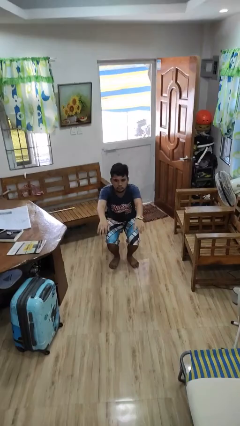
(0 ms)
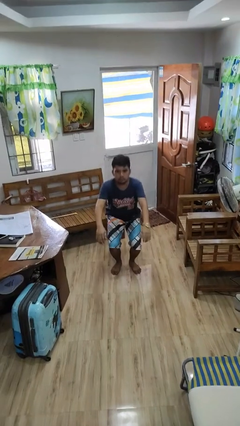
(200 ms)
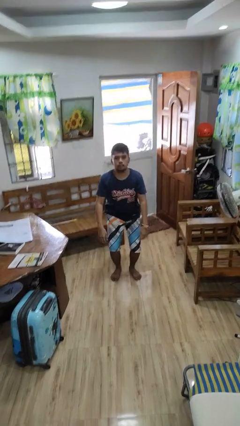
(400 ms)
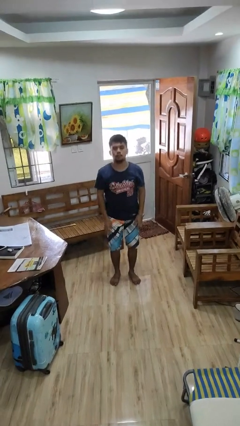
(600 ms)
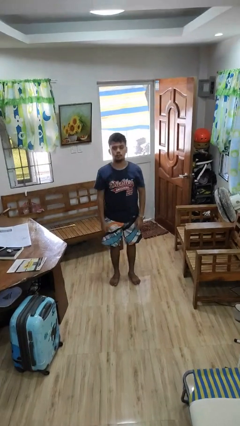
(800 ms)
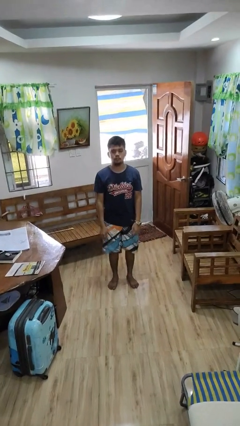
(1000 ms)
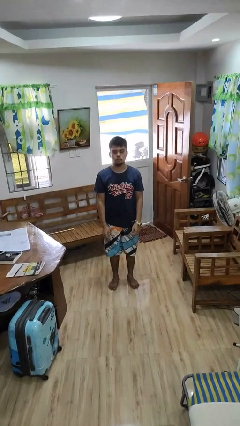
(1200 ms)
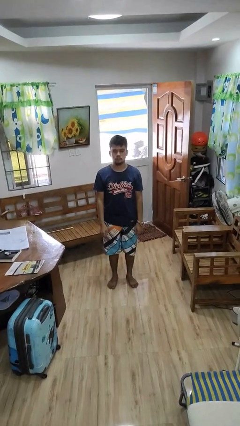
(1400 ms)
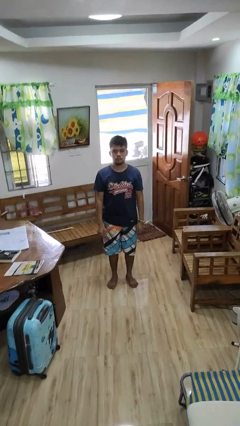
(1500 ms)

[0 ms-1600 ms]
person stands up

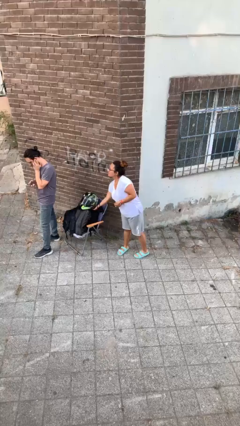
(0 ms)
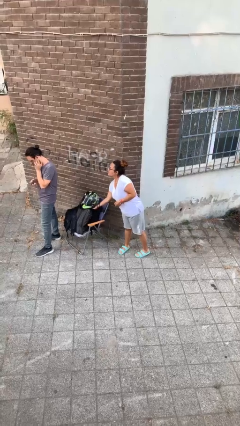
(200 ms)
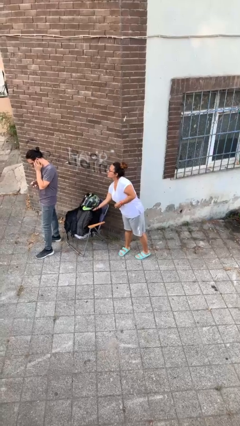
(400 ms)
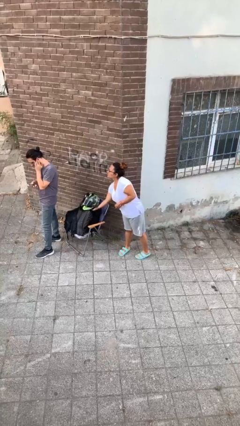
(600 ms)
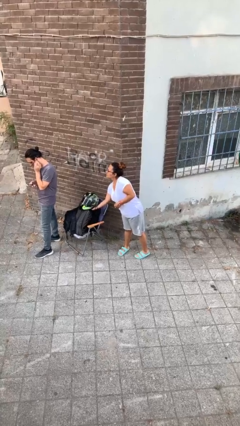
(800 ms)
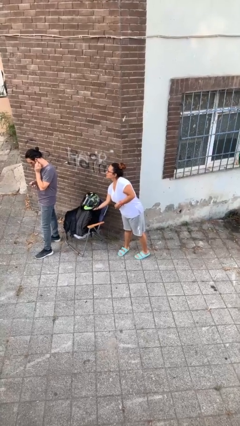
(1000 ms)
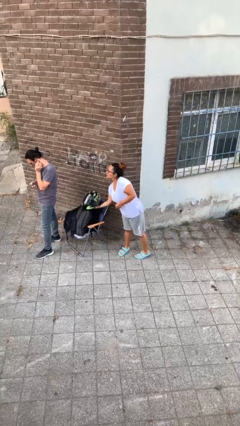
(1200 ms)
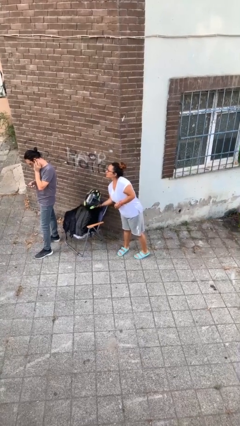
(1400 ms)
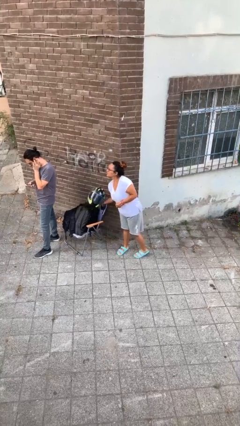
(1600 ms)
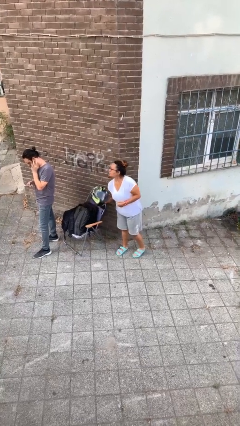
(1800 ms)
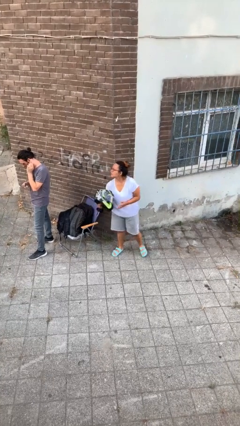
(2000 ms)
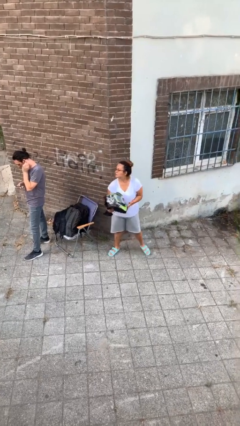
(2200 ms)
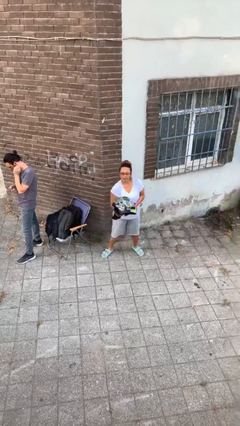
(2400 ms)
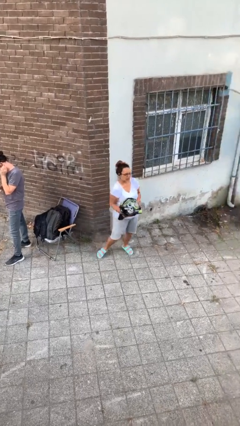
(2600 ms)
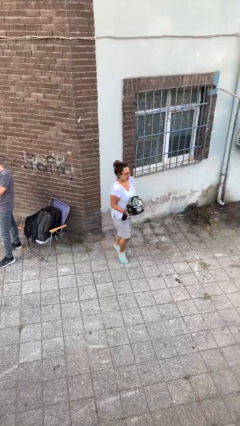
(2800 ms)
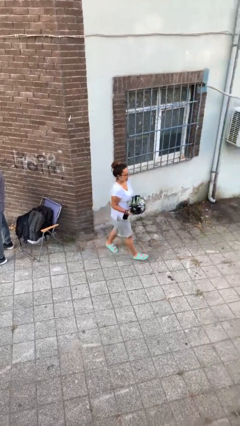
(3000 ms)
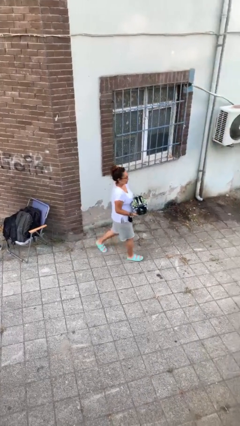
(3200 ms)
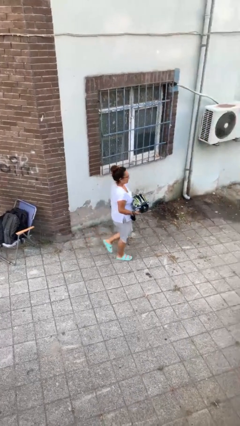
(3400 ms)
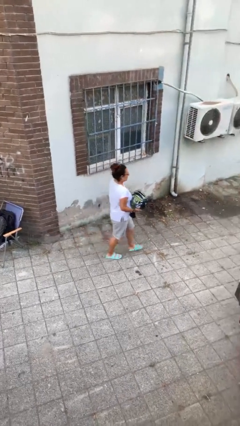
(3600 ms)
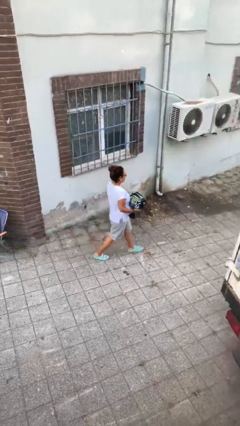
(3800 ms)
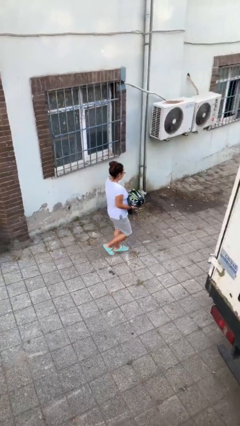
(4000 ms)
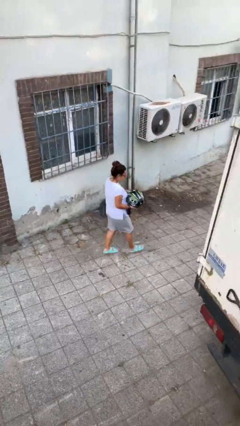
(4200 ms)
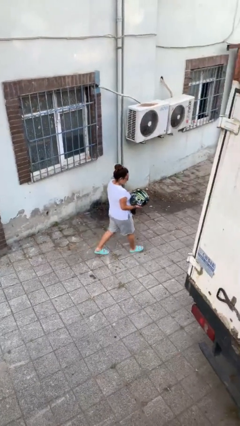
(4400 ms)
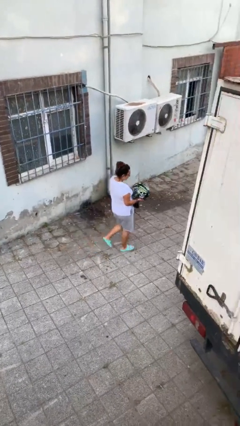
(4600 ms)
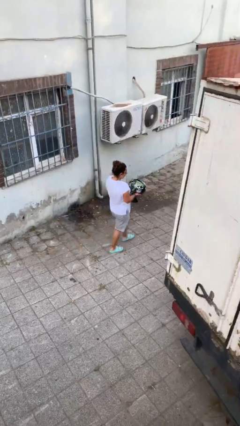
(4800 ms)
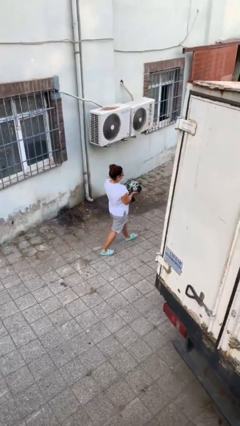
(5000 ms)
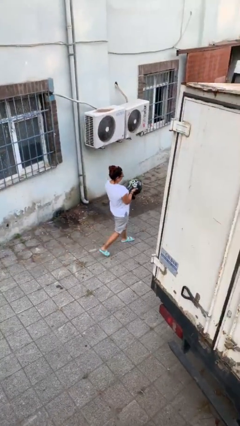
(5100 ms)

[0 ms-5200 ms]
person steals object from person

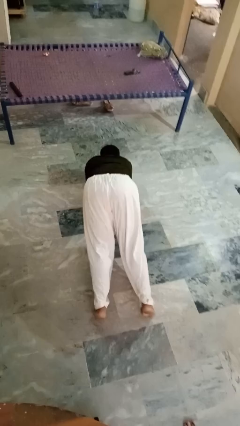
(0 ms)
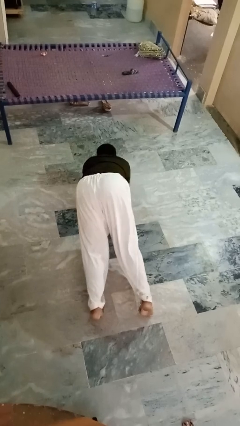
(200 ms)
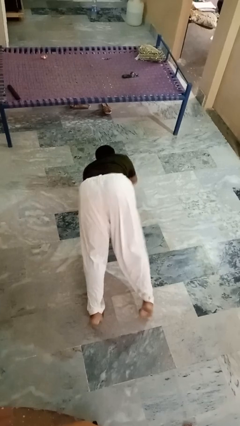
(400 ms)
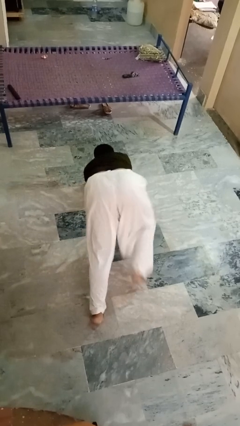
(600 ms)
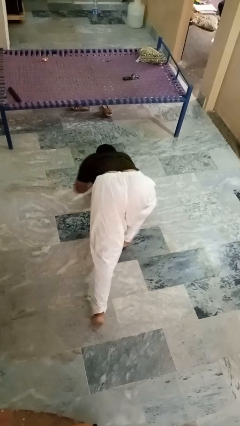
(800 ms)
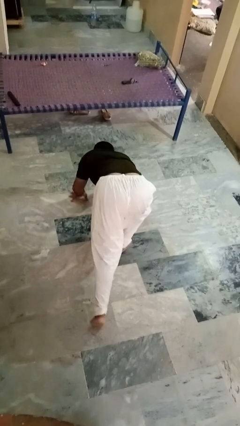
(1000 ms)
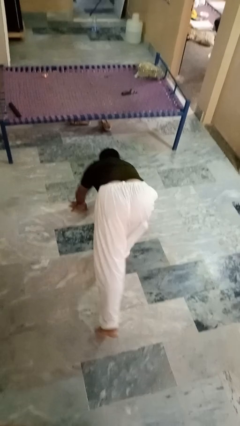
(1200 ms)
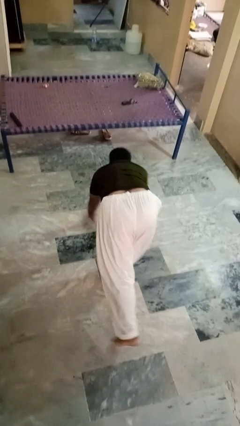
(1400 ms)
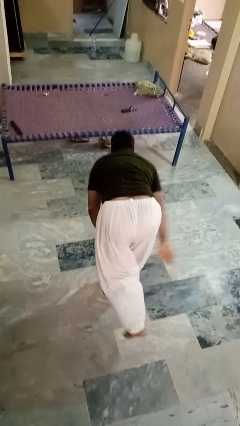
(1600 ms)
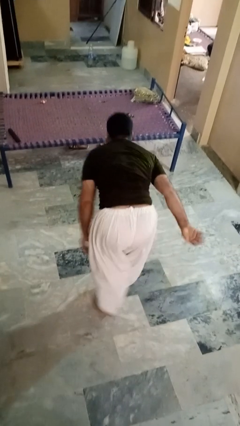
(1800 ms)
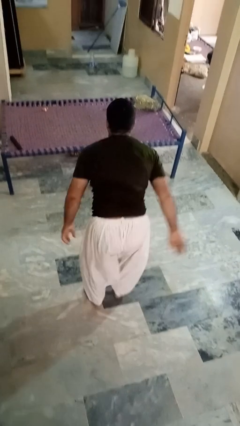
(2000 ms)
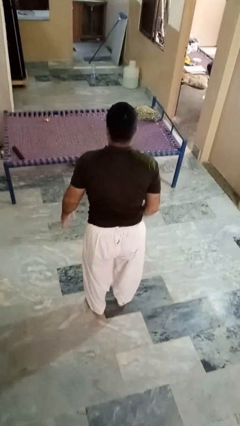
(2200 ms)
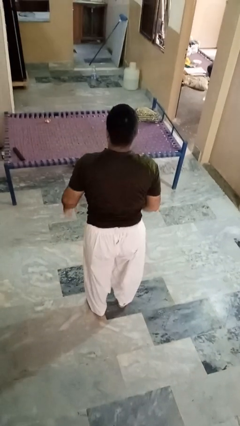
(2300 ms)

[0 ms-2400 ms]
person stands up from floor

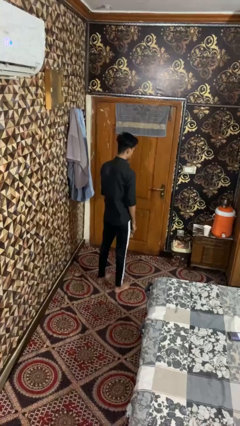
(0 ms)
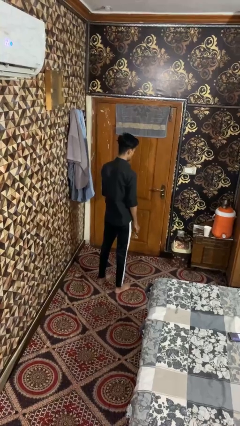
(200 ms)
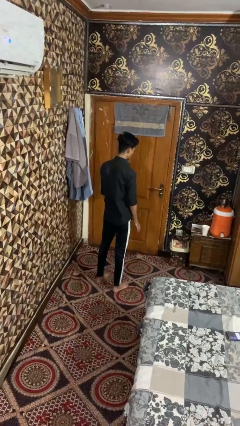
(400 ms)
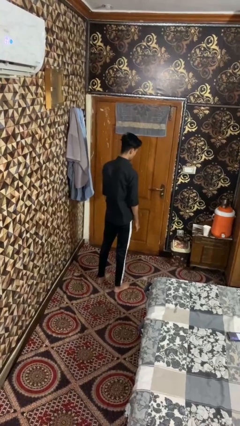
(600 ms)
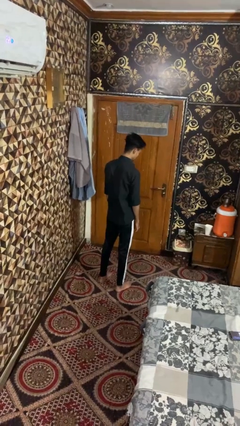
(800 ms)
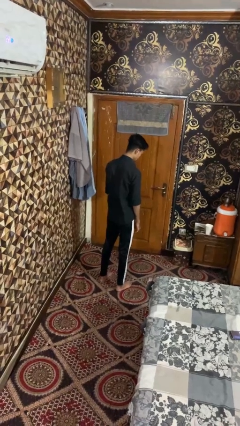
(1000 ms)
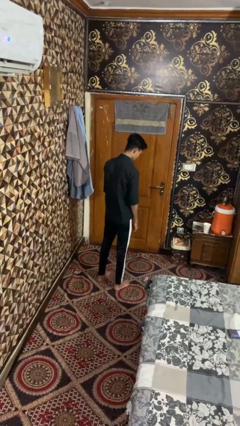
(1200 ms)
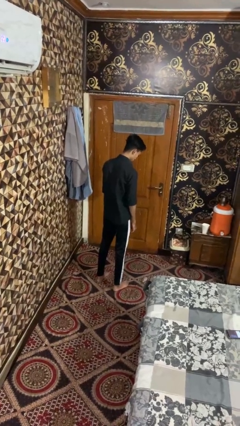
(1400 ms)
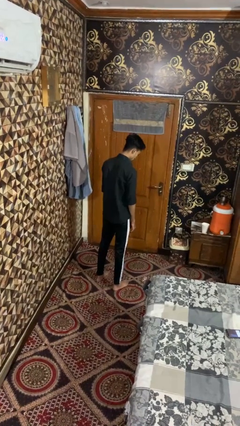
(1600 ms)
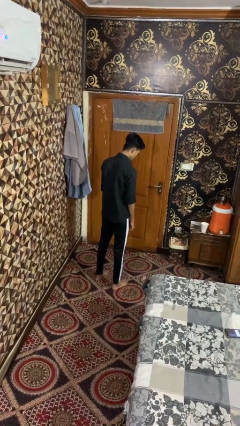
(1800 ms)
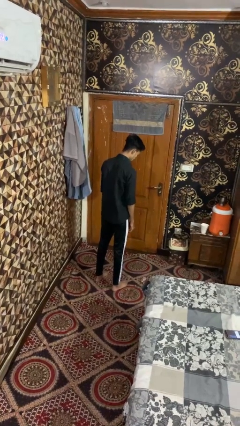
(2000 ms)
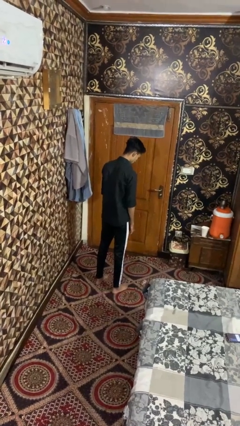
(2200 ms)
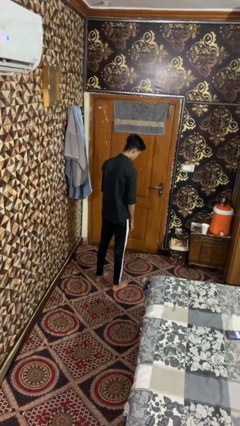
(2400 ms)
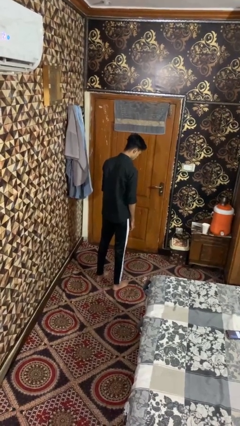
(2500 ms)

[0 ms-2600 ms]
person drops object

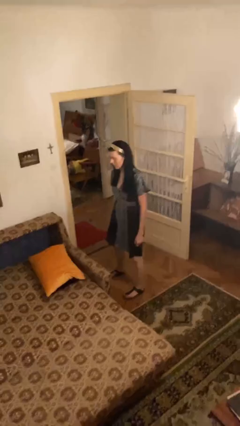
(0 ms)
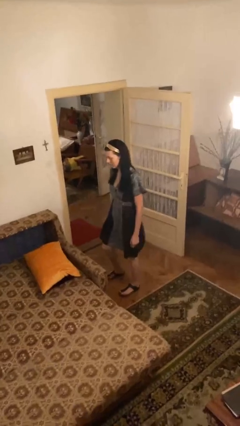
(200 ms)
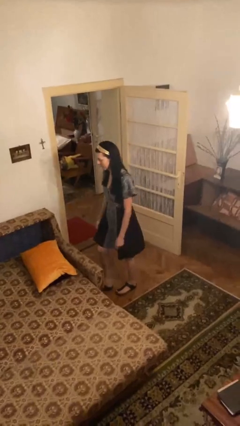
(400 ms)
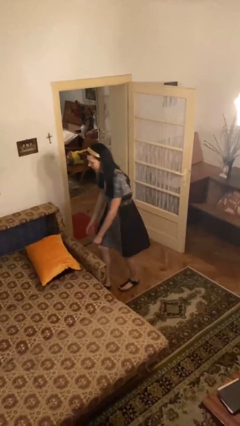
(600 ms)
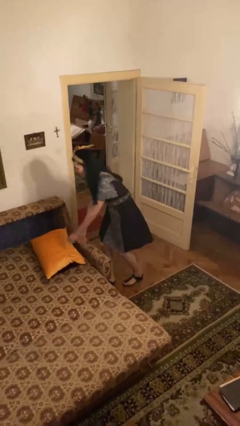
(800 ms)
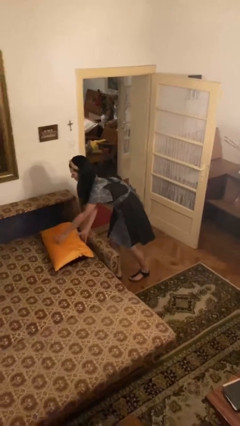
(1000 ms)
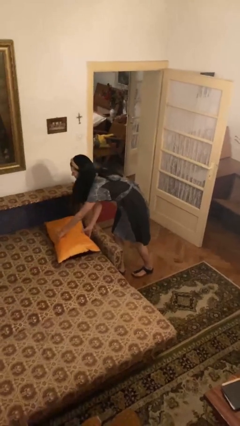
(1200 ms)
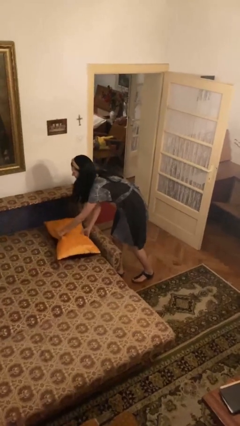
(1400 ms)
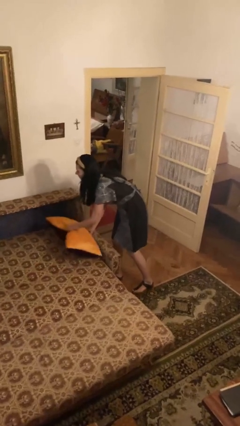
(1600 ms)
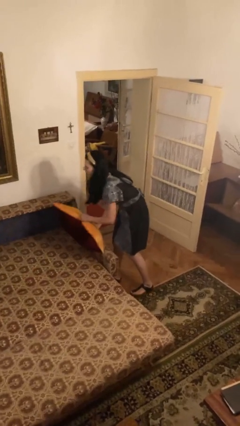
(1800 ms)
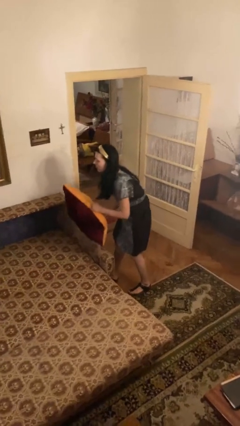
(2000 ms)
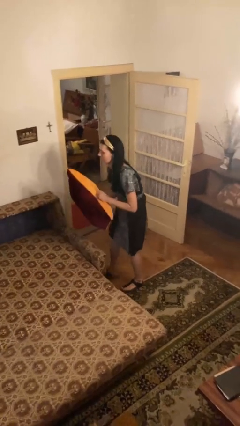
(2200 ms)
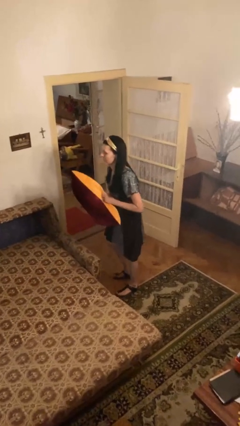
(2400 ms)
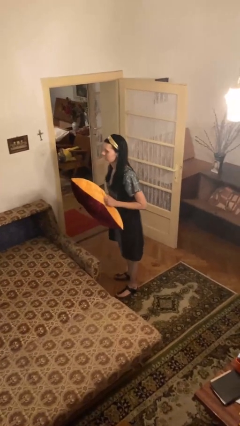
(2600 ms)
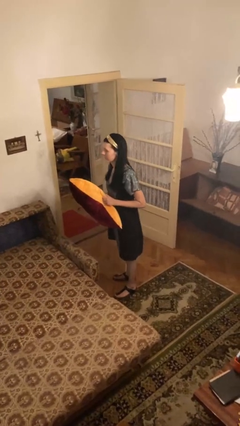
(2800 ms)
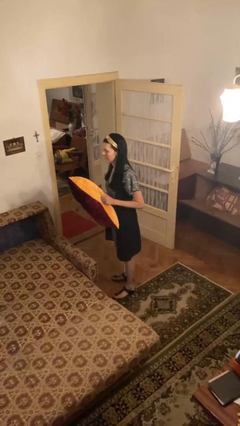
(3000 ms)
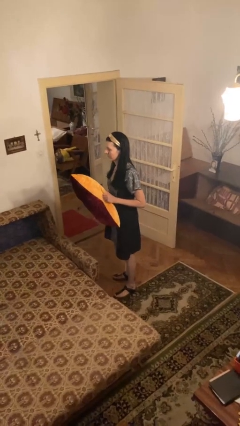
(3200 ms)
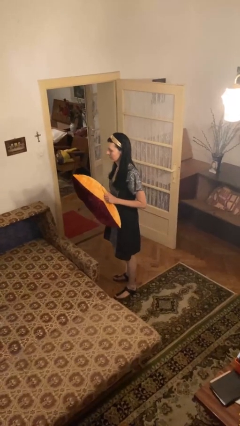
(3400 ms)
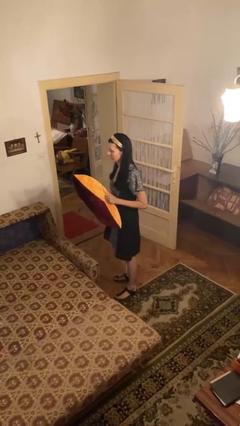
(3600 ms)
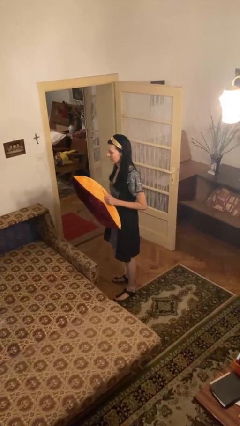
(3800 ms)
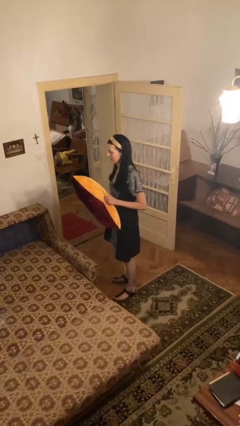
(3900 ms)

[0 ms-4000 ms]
person picks up object from bed

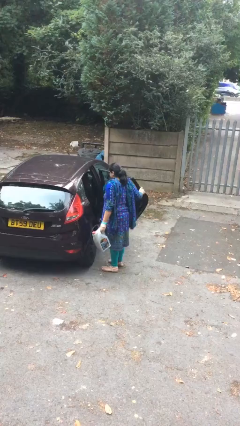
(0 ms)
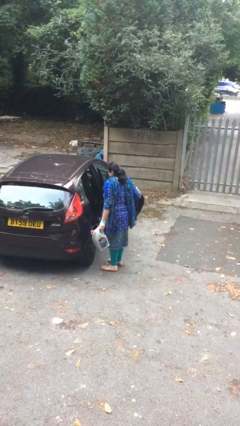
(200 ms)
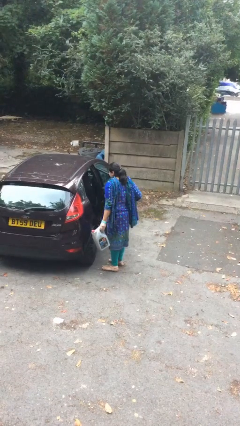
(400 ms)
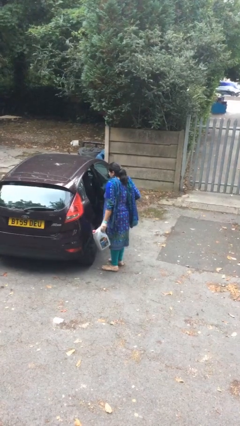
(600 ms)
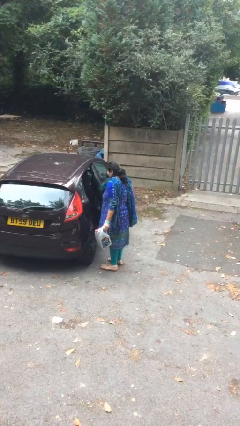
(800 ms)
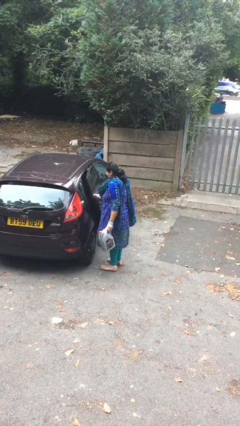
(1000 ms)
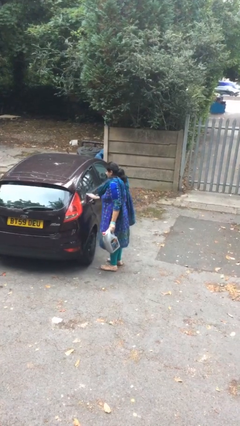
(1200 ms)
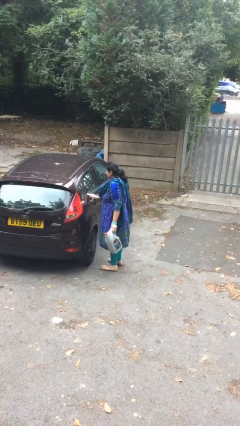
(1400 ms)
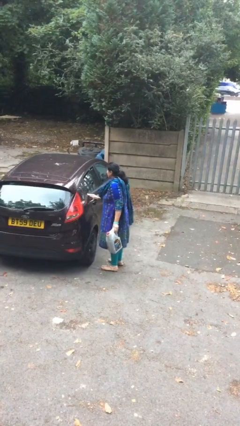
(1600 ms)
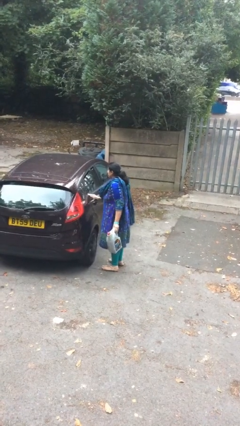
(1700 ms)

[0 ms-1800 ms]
person closes car door
